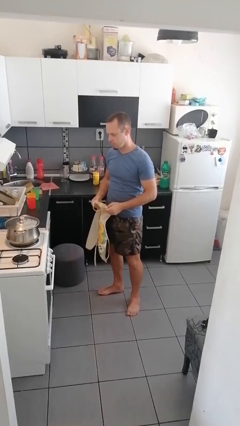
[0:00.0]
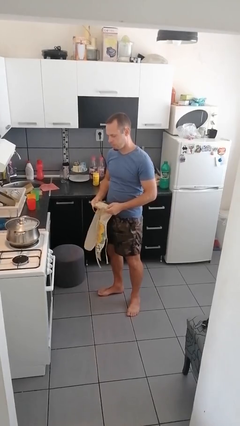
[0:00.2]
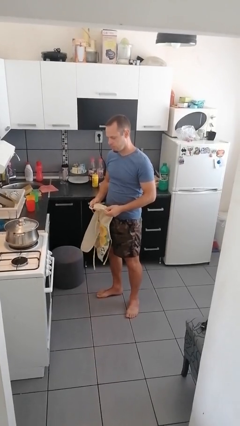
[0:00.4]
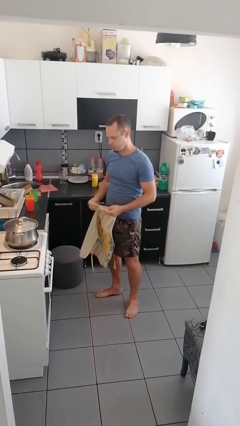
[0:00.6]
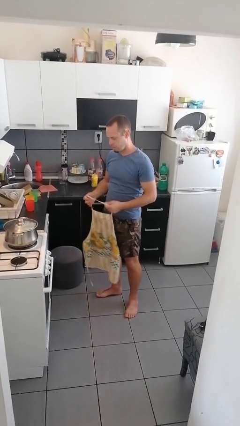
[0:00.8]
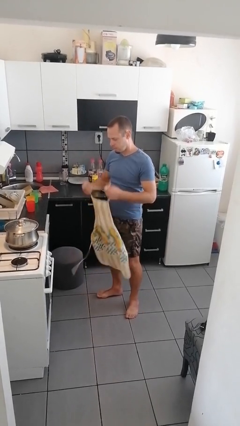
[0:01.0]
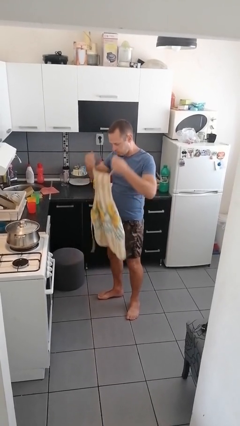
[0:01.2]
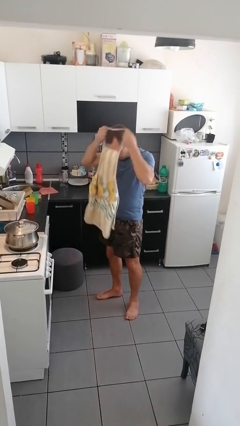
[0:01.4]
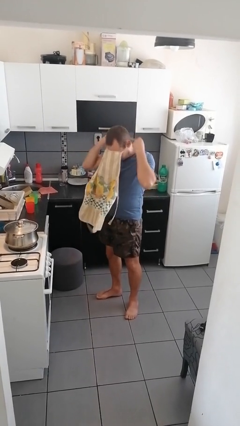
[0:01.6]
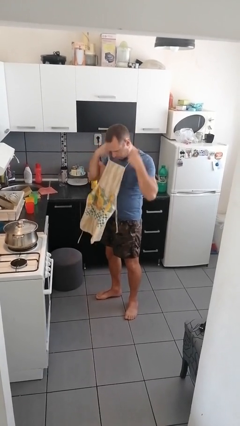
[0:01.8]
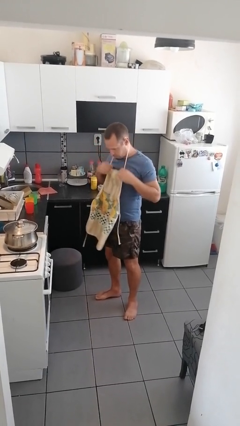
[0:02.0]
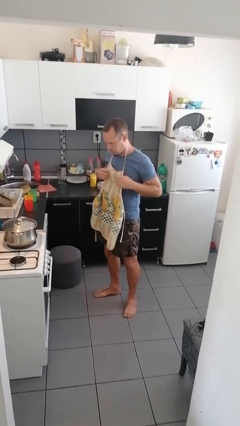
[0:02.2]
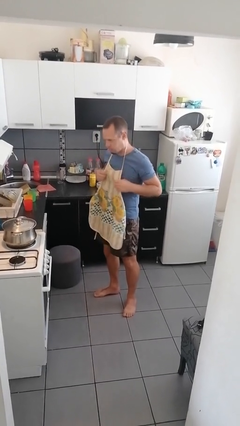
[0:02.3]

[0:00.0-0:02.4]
person puts on apron

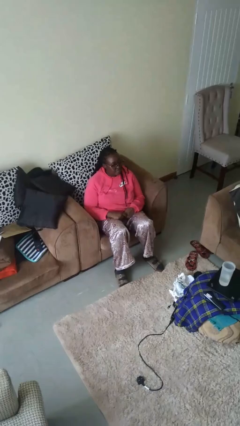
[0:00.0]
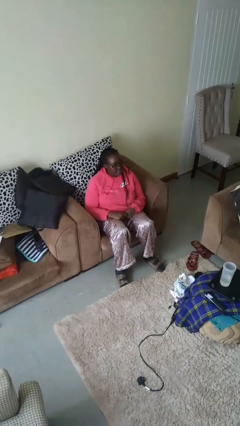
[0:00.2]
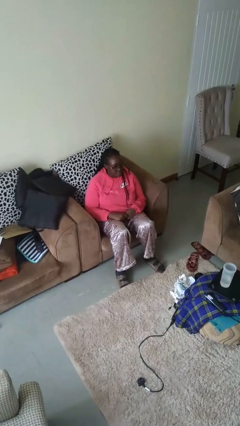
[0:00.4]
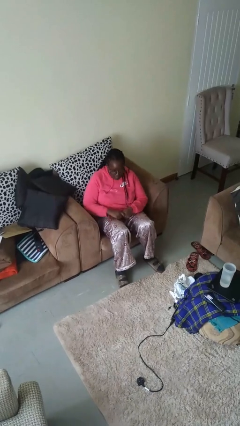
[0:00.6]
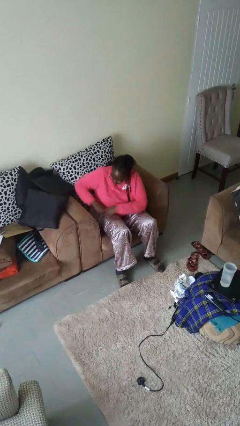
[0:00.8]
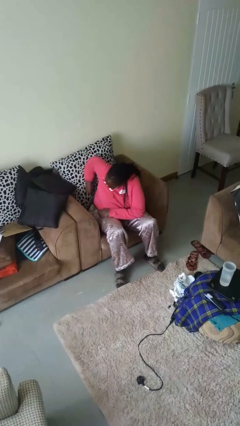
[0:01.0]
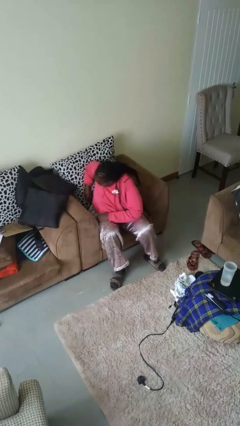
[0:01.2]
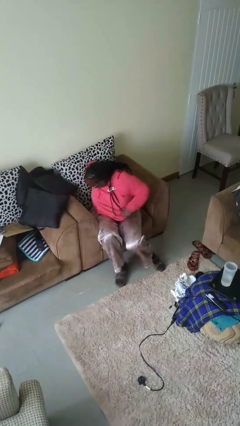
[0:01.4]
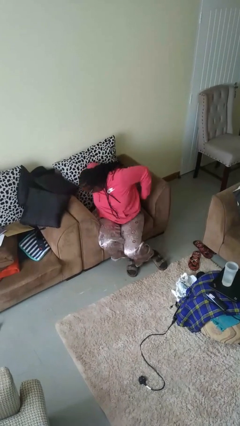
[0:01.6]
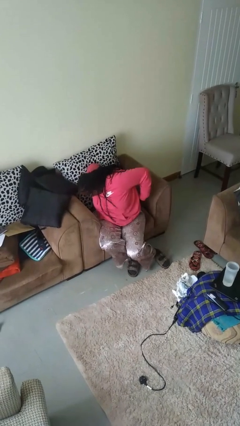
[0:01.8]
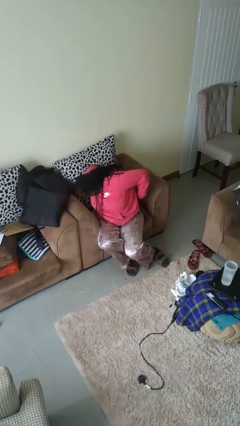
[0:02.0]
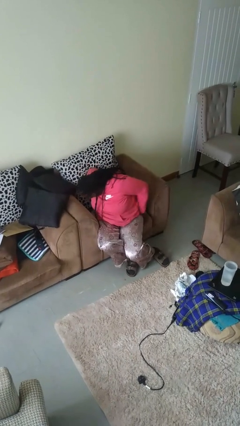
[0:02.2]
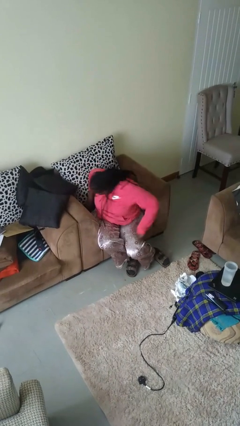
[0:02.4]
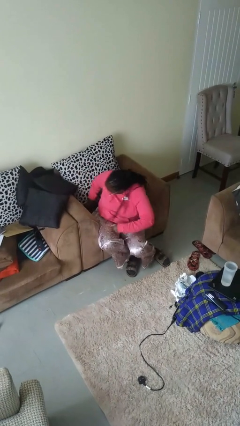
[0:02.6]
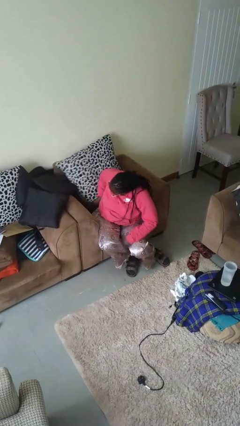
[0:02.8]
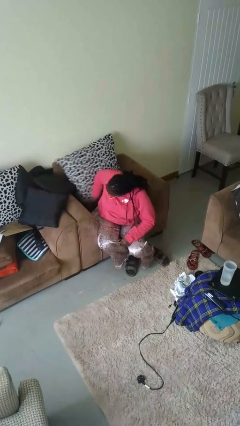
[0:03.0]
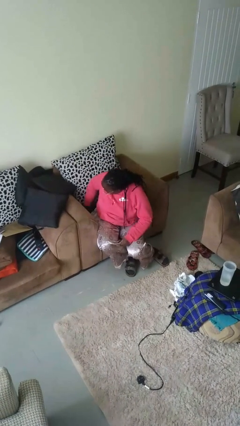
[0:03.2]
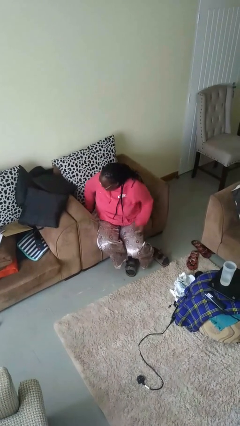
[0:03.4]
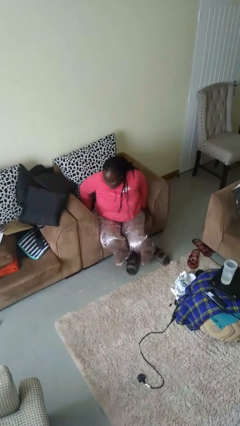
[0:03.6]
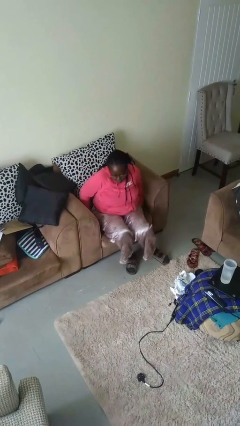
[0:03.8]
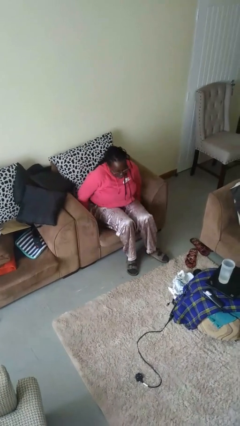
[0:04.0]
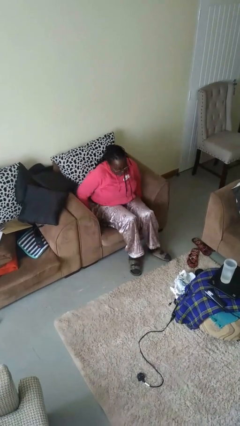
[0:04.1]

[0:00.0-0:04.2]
person searches in couch

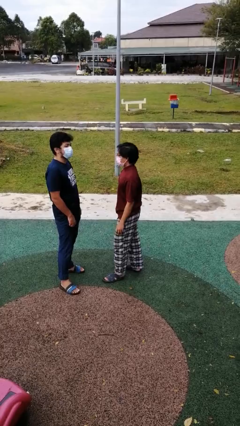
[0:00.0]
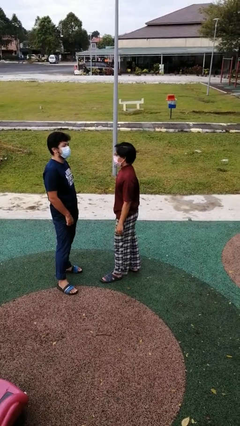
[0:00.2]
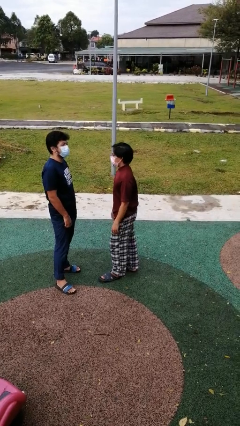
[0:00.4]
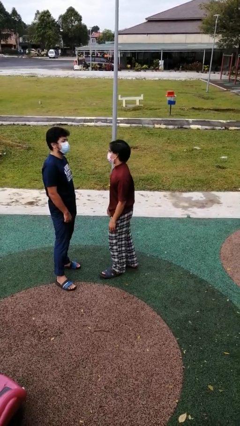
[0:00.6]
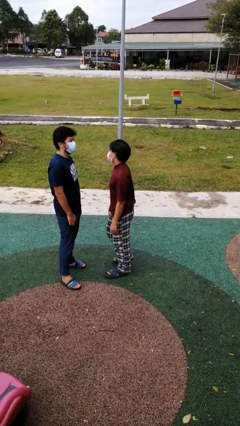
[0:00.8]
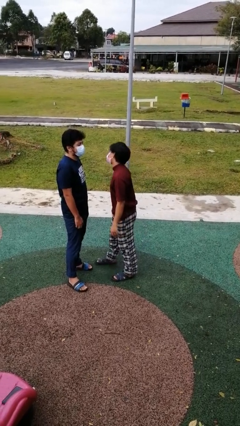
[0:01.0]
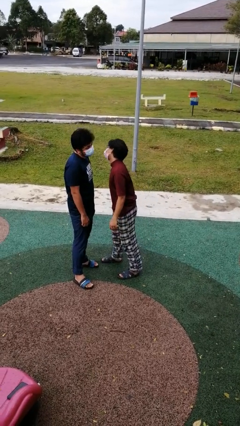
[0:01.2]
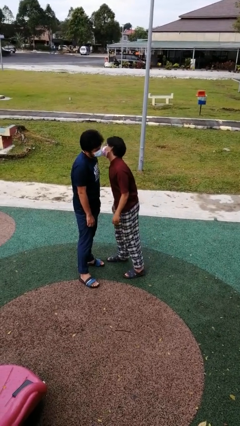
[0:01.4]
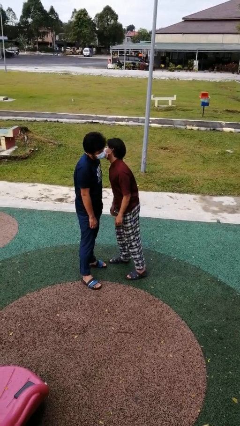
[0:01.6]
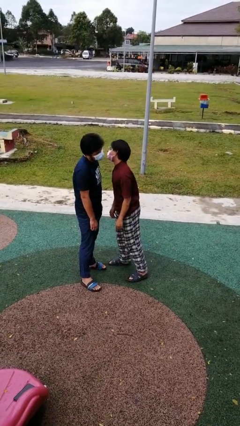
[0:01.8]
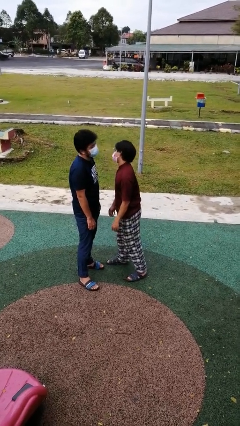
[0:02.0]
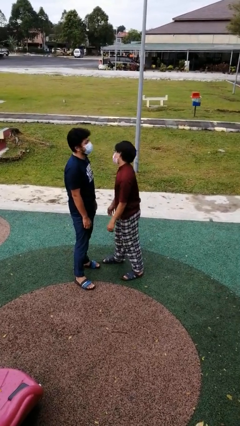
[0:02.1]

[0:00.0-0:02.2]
person kisses cheek of person

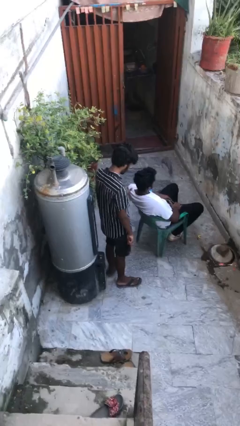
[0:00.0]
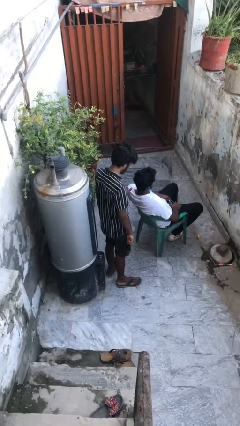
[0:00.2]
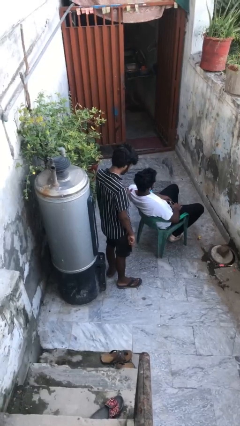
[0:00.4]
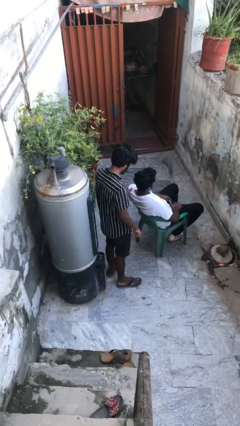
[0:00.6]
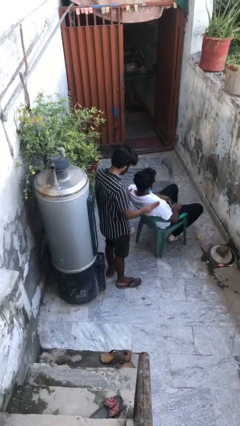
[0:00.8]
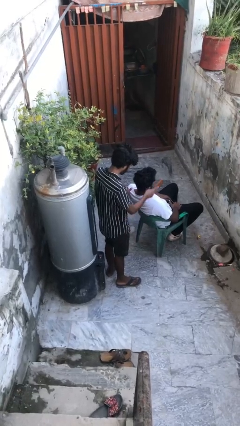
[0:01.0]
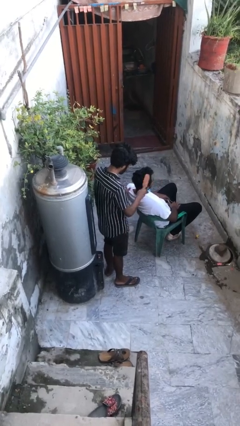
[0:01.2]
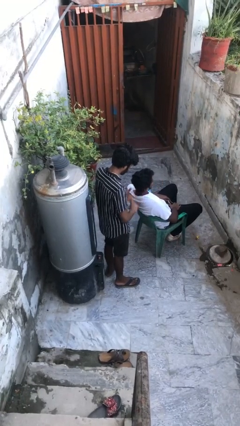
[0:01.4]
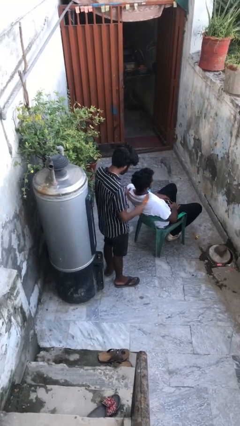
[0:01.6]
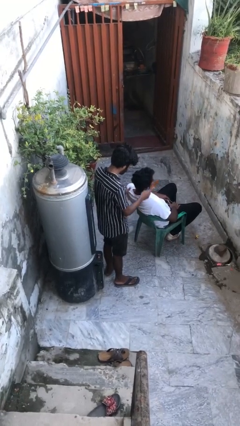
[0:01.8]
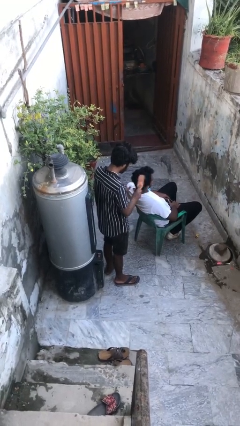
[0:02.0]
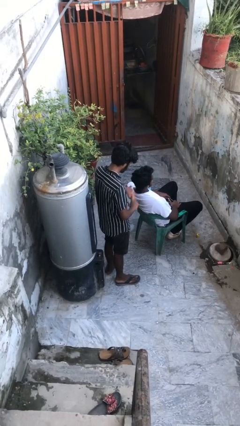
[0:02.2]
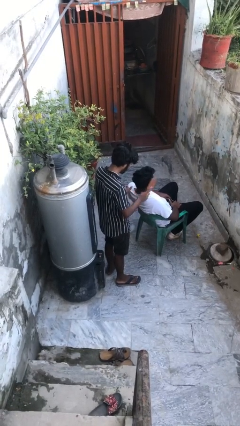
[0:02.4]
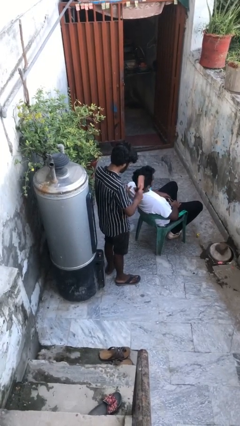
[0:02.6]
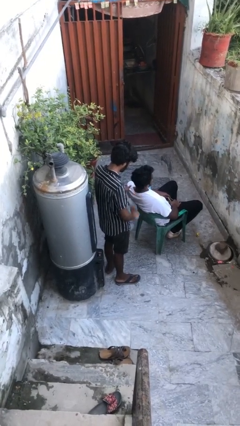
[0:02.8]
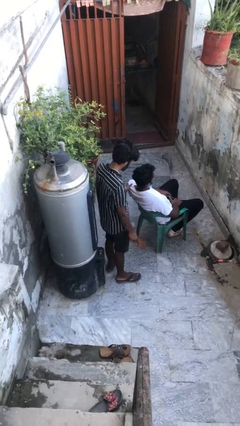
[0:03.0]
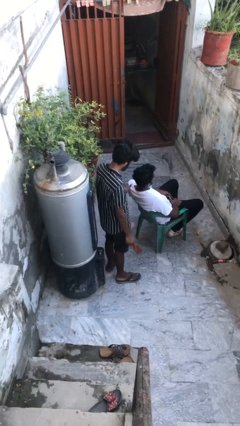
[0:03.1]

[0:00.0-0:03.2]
person brushes hair of person

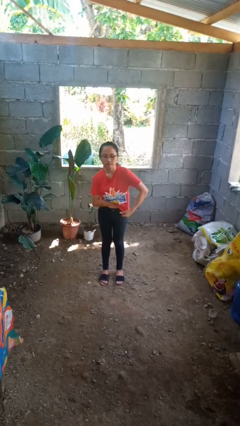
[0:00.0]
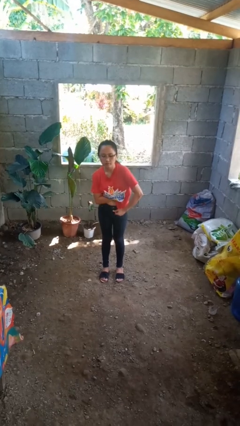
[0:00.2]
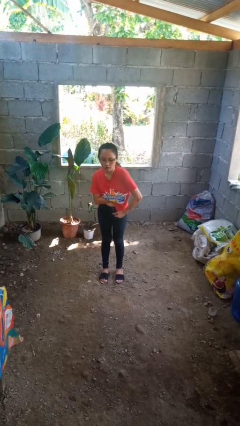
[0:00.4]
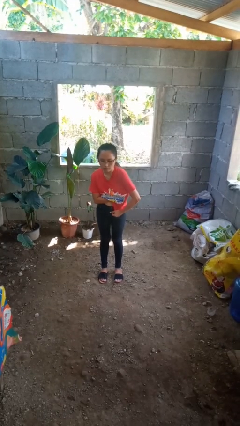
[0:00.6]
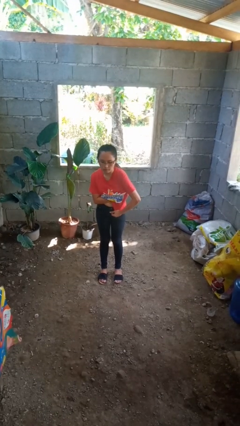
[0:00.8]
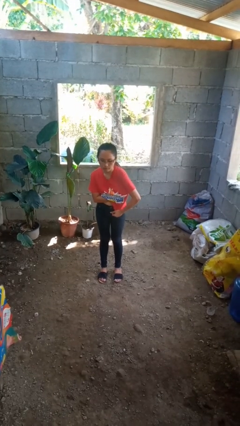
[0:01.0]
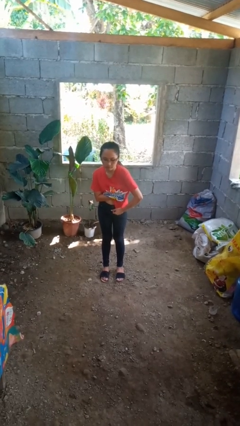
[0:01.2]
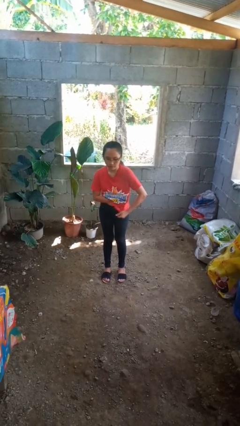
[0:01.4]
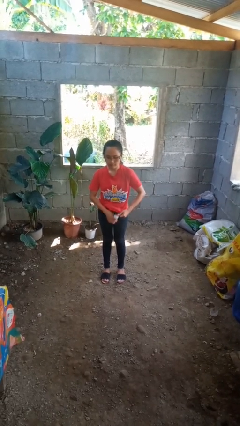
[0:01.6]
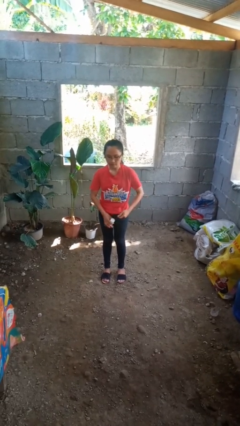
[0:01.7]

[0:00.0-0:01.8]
person applies deodorant

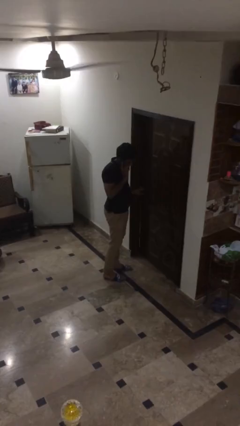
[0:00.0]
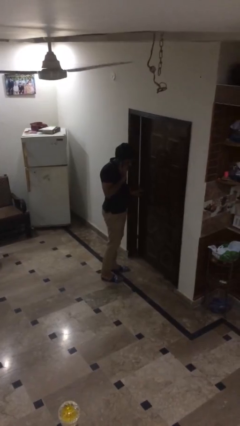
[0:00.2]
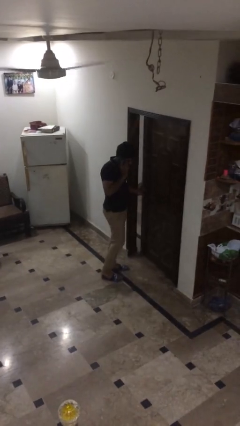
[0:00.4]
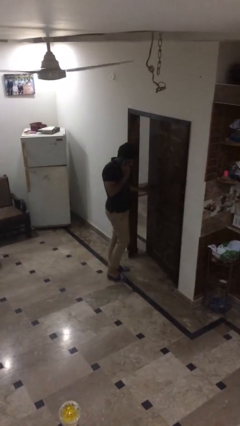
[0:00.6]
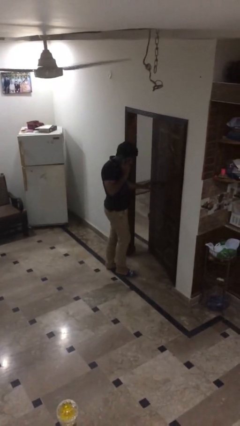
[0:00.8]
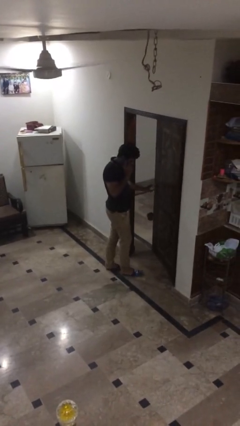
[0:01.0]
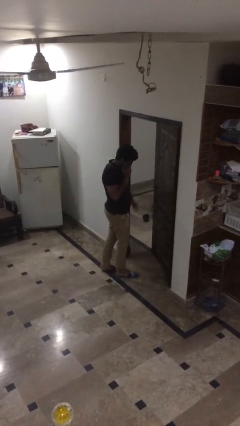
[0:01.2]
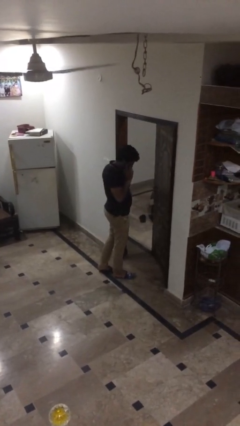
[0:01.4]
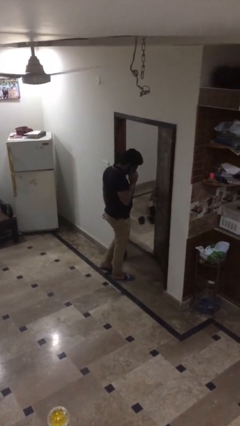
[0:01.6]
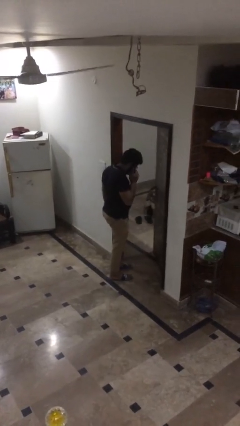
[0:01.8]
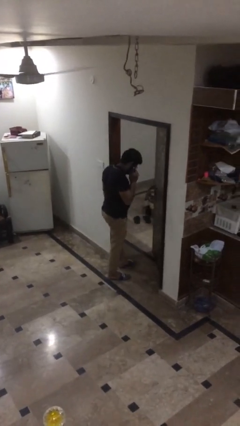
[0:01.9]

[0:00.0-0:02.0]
person opens facility door

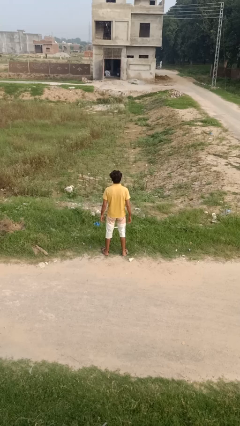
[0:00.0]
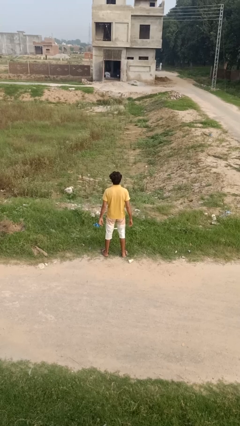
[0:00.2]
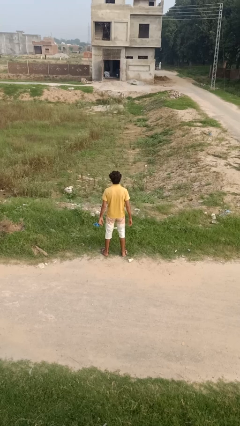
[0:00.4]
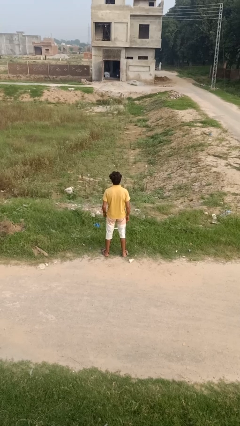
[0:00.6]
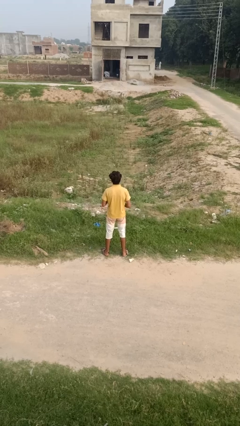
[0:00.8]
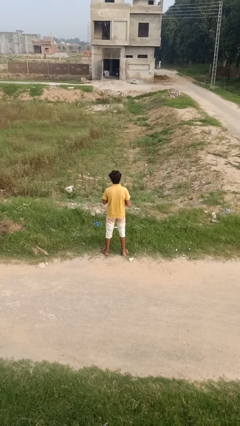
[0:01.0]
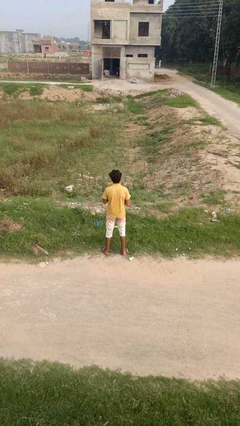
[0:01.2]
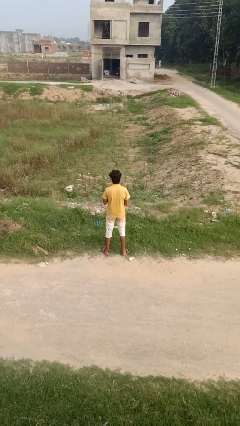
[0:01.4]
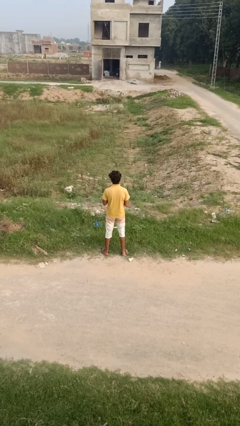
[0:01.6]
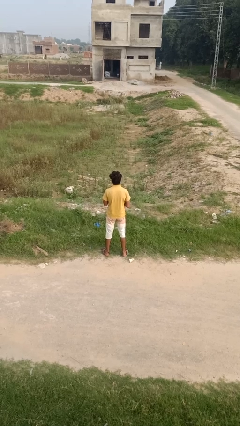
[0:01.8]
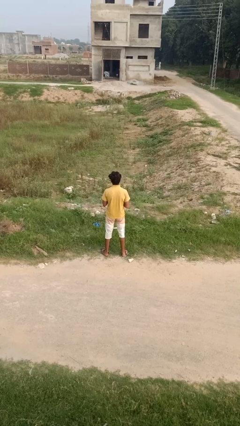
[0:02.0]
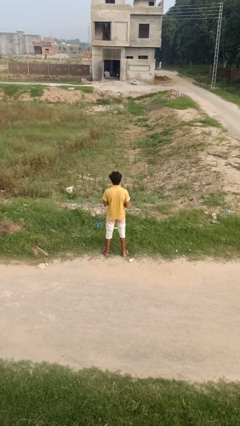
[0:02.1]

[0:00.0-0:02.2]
person unbuttons shirt
